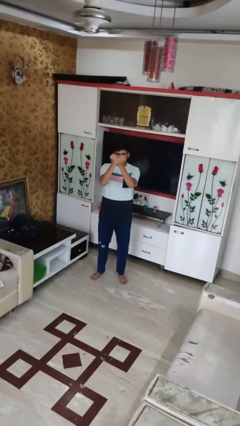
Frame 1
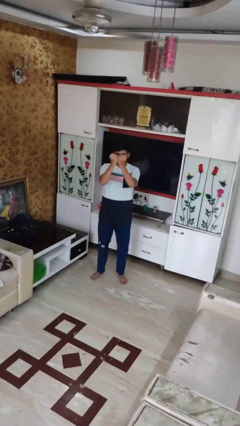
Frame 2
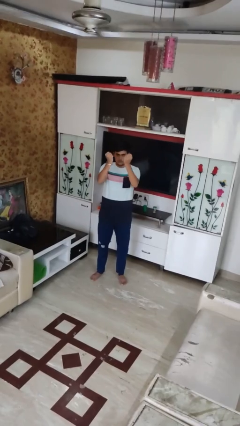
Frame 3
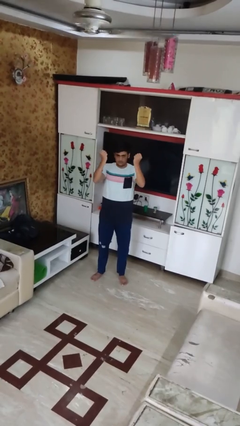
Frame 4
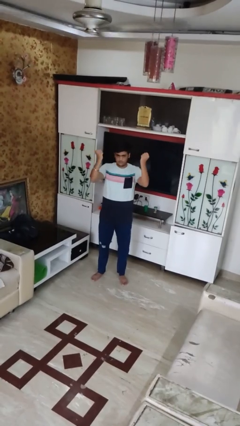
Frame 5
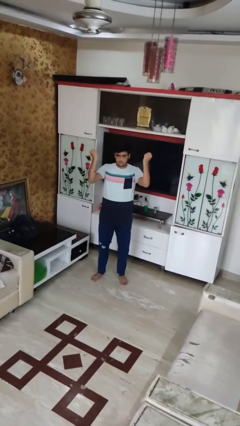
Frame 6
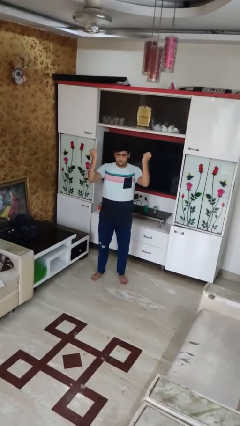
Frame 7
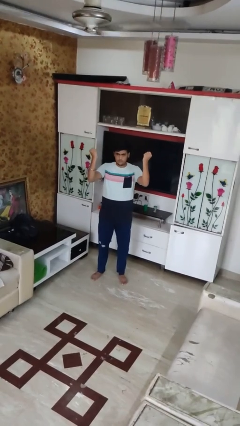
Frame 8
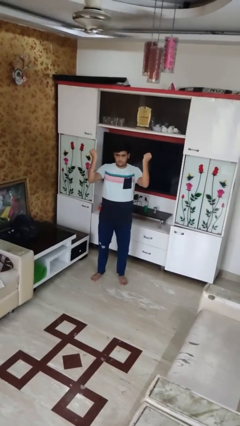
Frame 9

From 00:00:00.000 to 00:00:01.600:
person gestures zoom in

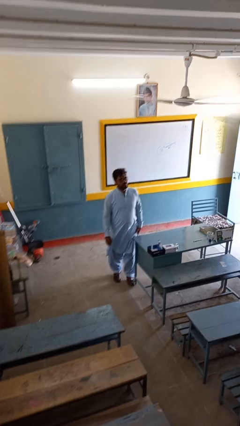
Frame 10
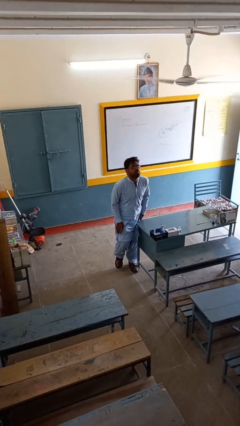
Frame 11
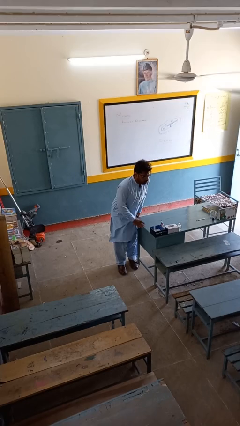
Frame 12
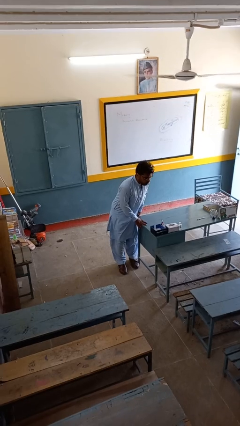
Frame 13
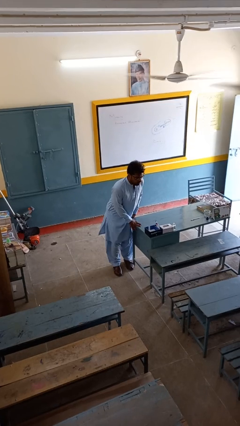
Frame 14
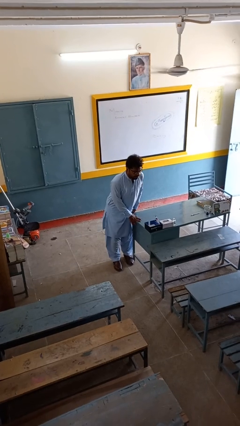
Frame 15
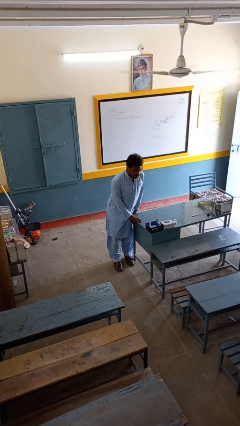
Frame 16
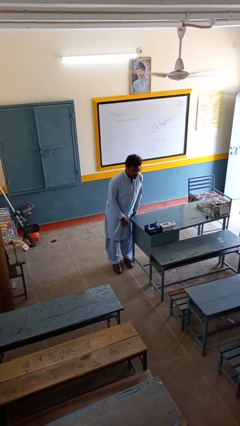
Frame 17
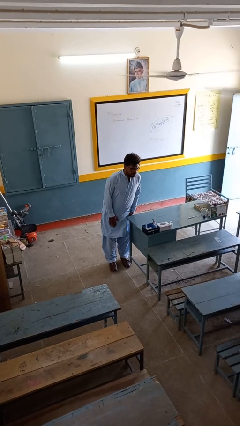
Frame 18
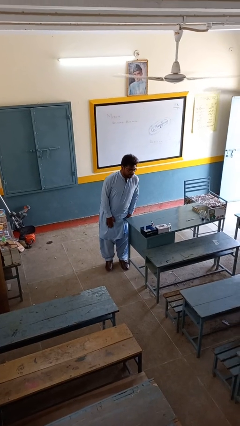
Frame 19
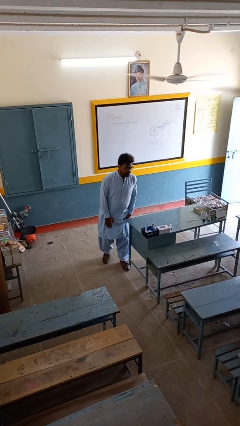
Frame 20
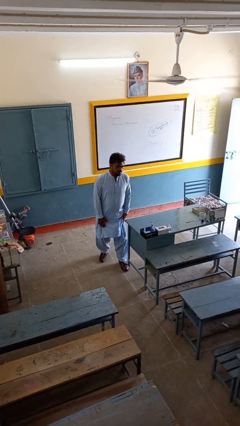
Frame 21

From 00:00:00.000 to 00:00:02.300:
person bumps into table

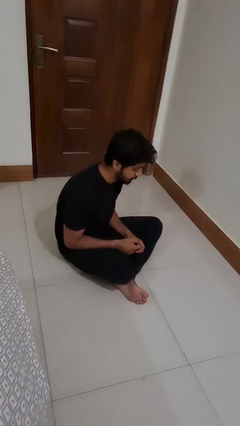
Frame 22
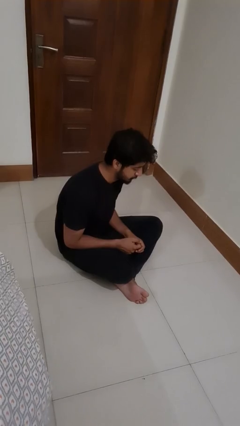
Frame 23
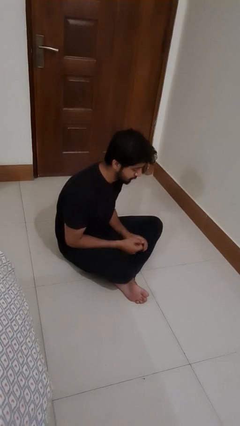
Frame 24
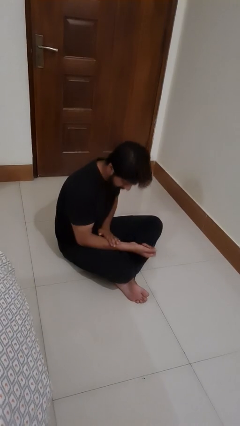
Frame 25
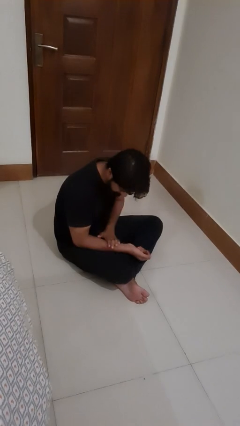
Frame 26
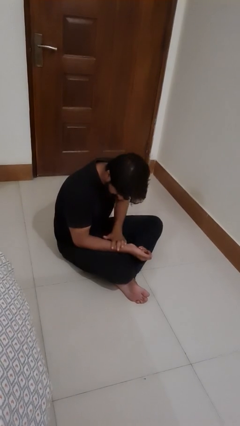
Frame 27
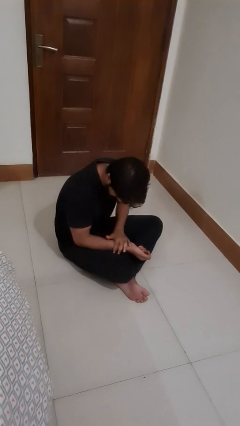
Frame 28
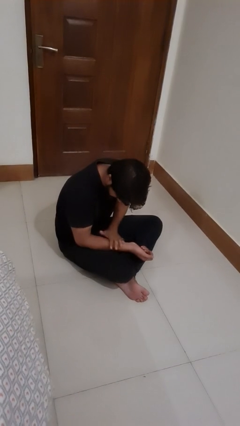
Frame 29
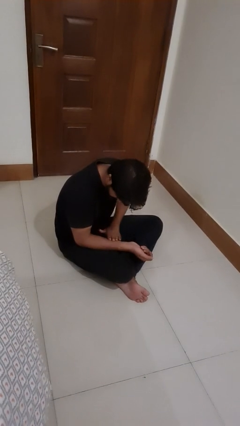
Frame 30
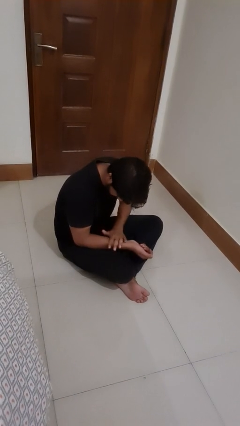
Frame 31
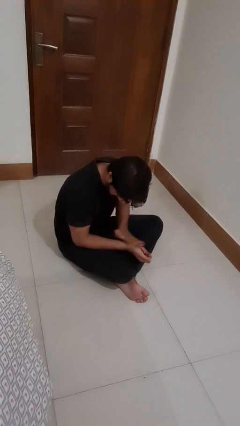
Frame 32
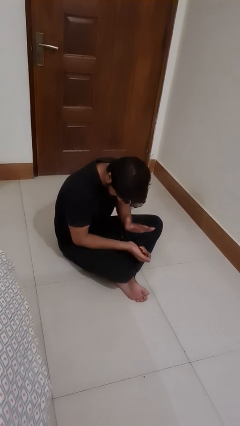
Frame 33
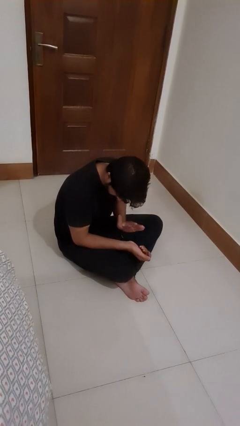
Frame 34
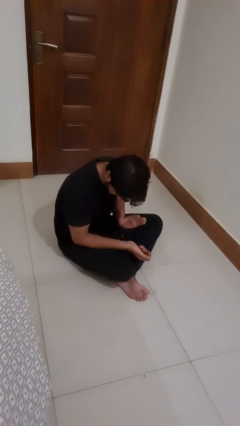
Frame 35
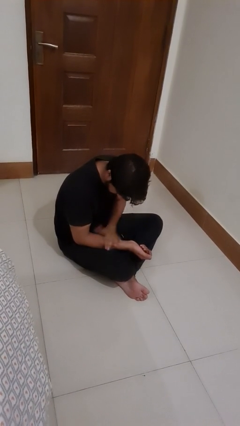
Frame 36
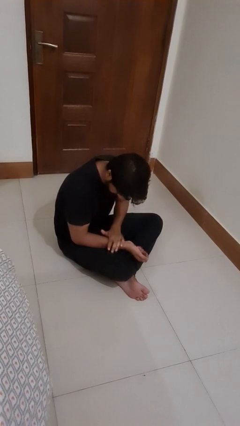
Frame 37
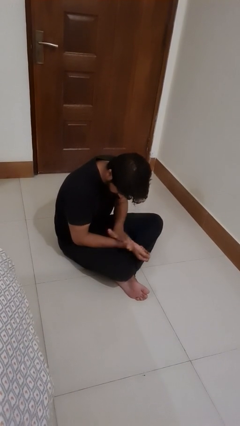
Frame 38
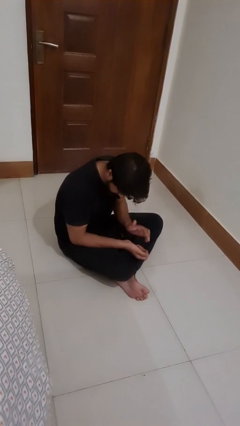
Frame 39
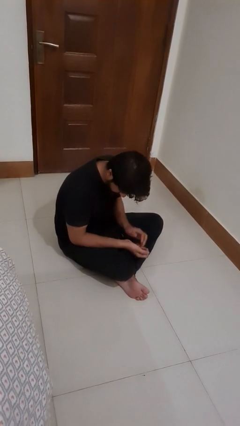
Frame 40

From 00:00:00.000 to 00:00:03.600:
person swats bug

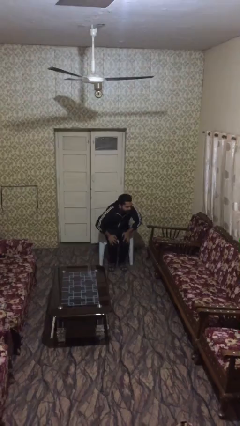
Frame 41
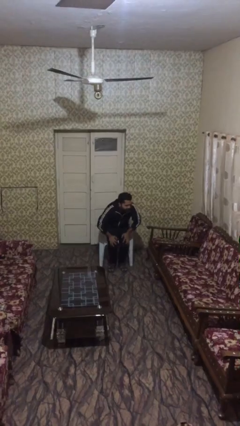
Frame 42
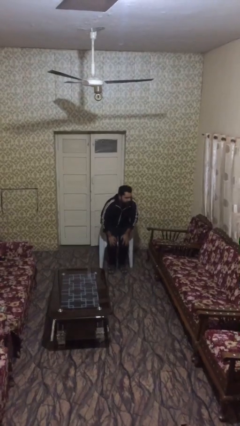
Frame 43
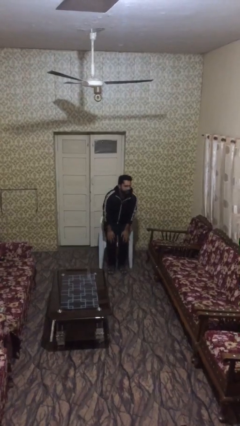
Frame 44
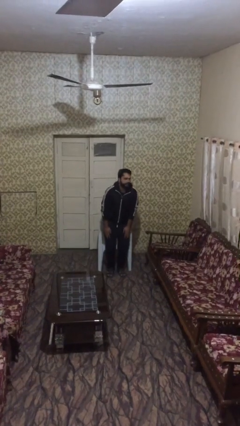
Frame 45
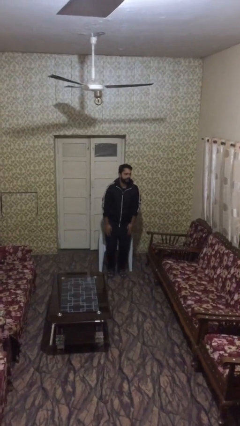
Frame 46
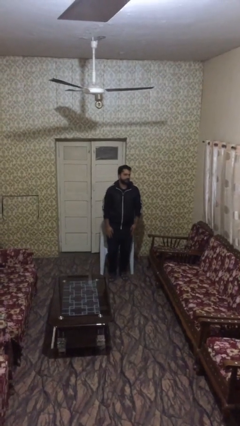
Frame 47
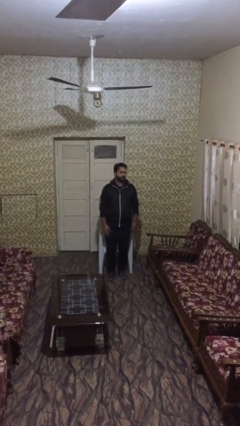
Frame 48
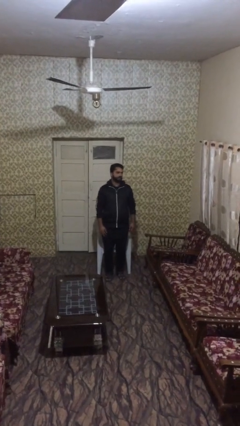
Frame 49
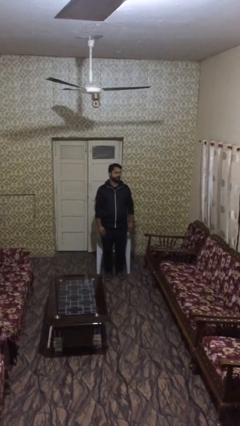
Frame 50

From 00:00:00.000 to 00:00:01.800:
person stands up

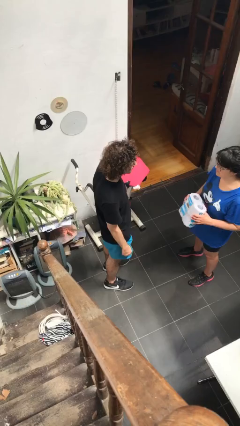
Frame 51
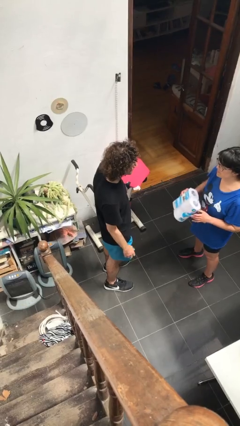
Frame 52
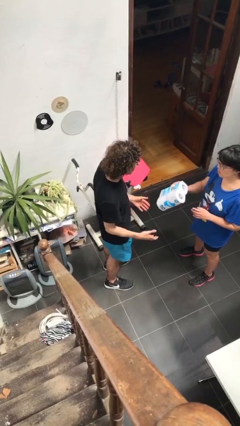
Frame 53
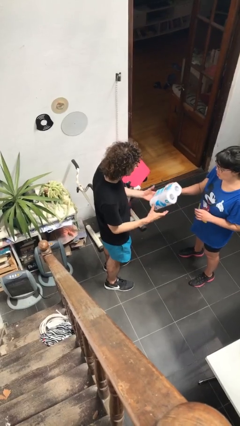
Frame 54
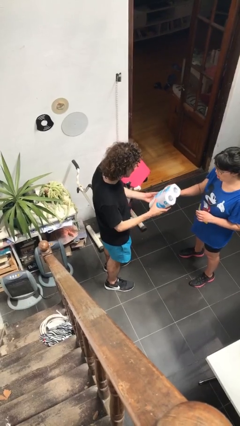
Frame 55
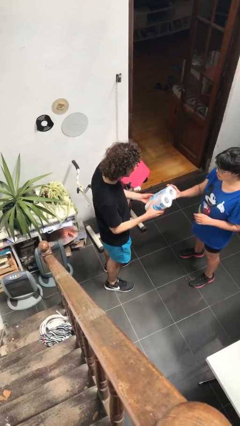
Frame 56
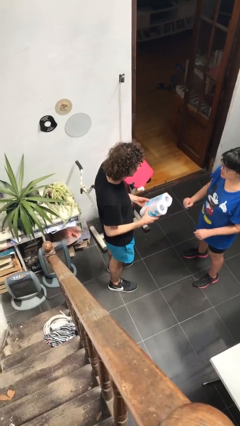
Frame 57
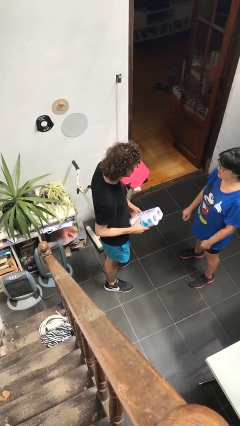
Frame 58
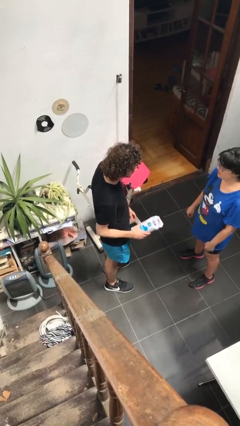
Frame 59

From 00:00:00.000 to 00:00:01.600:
person transfers object to person

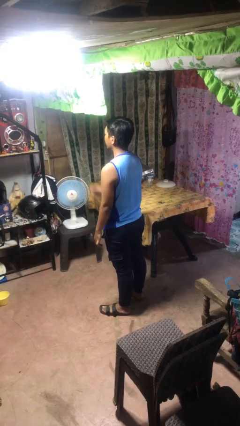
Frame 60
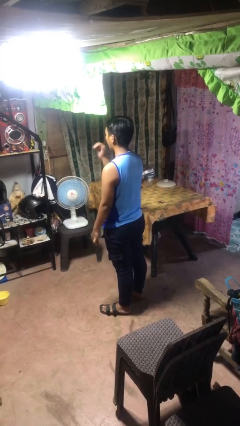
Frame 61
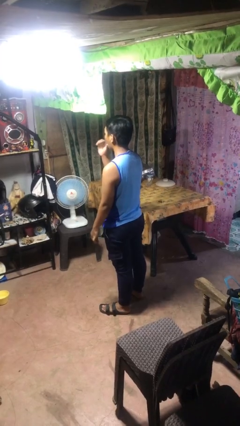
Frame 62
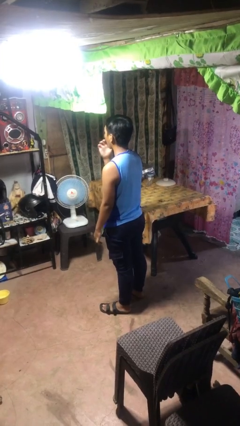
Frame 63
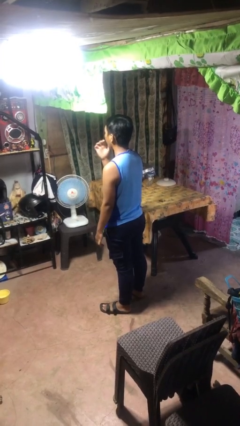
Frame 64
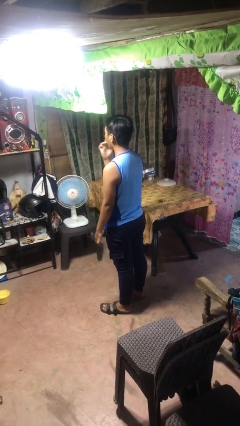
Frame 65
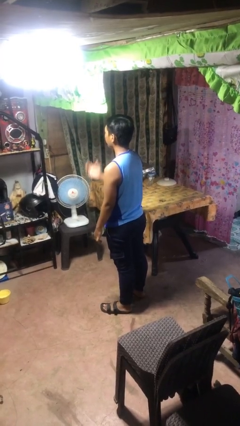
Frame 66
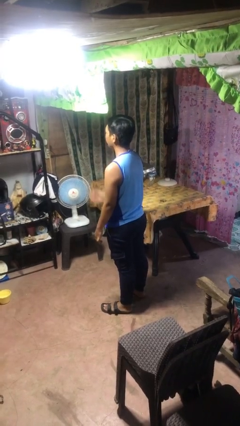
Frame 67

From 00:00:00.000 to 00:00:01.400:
person licks fingers

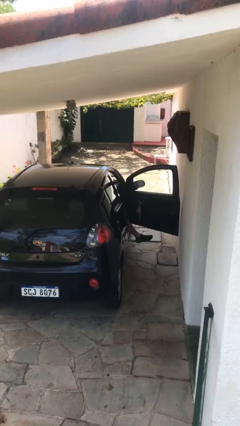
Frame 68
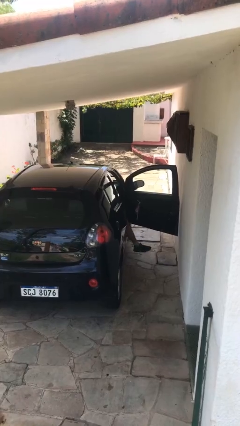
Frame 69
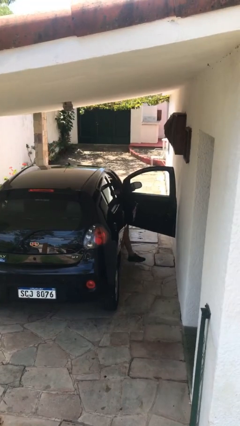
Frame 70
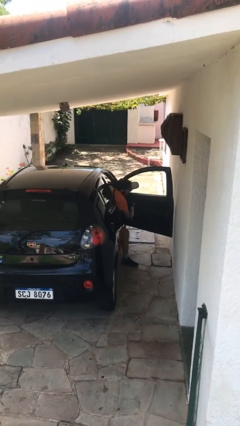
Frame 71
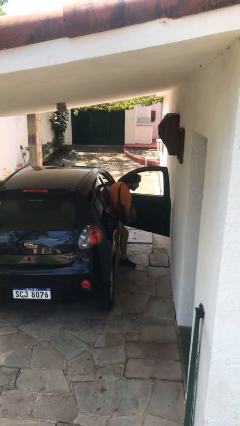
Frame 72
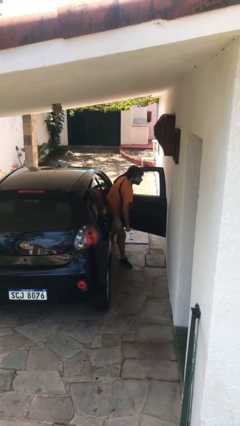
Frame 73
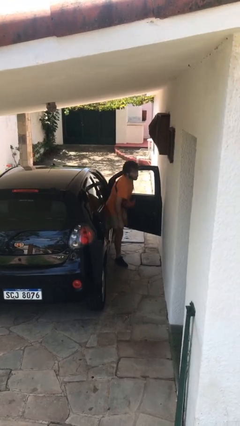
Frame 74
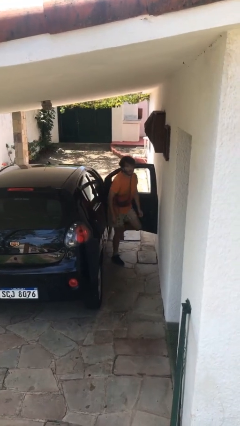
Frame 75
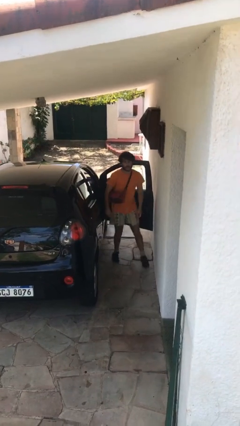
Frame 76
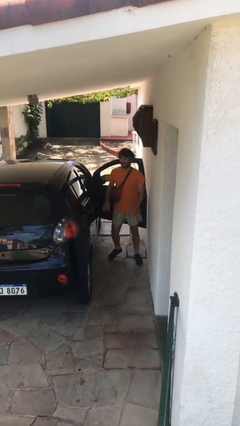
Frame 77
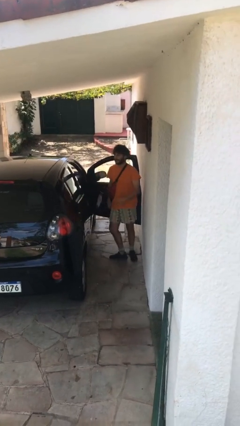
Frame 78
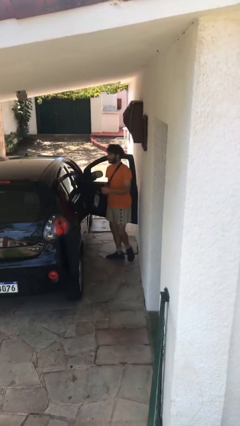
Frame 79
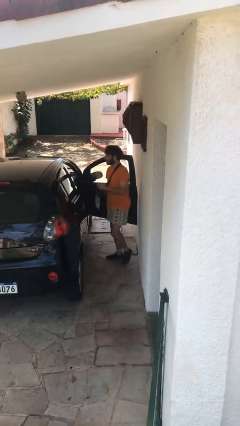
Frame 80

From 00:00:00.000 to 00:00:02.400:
person exits car

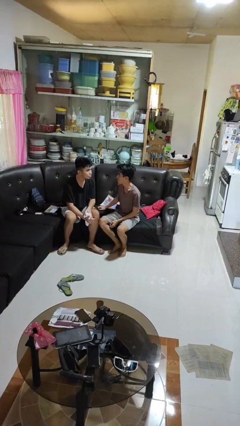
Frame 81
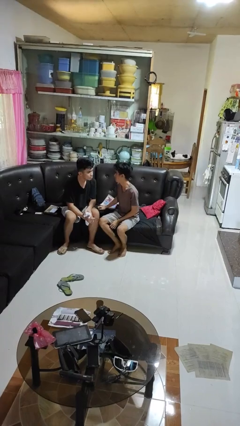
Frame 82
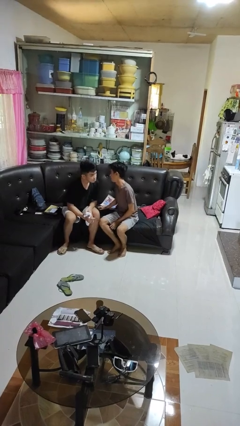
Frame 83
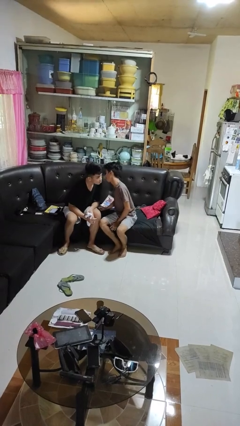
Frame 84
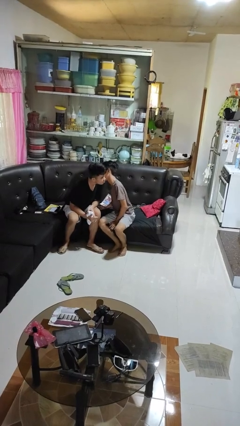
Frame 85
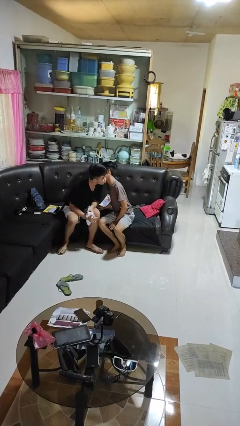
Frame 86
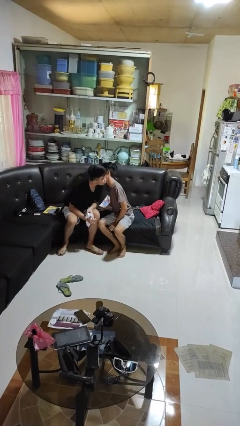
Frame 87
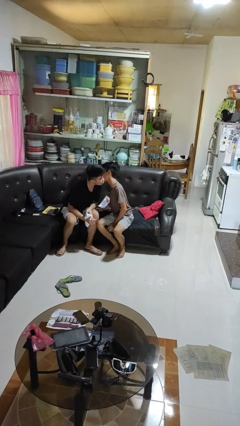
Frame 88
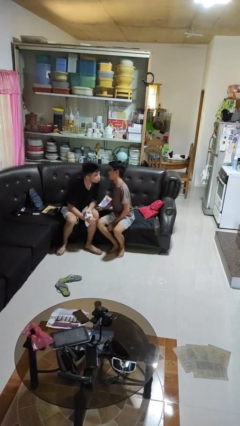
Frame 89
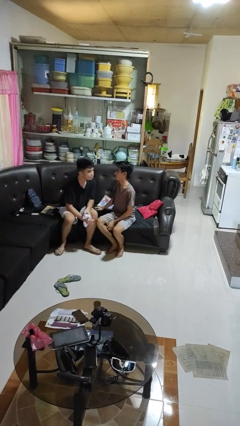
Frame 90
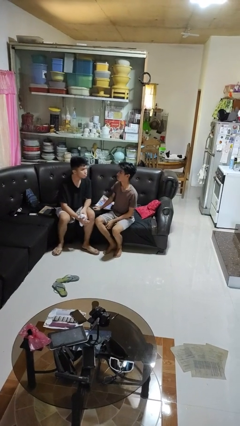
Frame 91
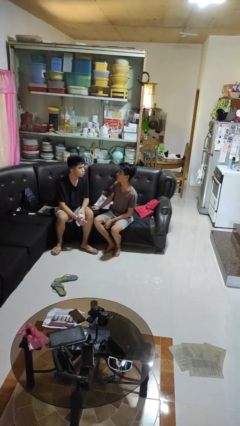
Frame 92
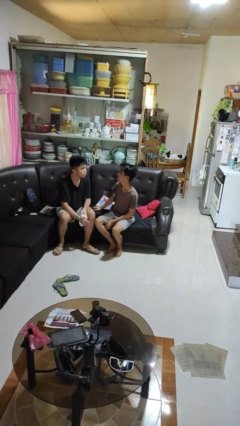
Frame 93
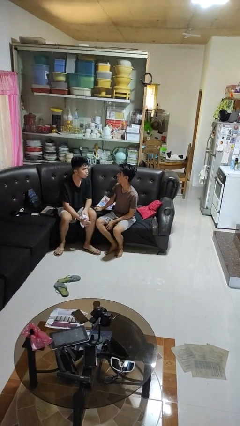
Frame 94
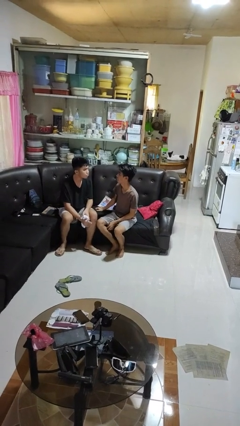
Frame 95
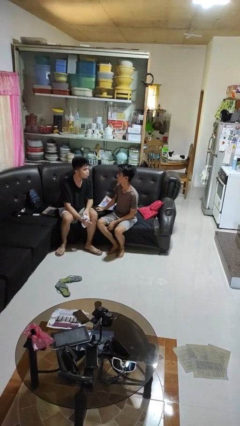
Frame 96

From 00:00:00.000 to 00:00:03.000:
person kisses cheek of person
